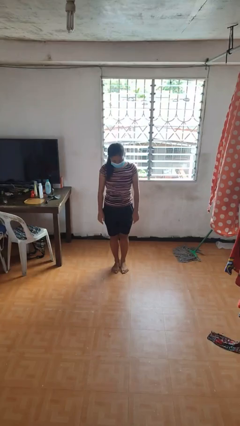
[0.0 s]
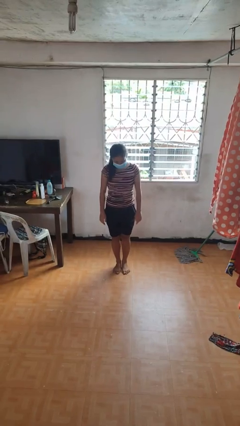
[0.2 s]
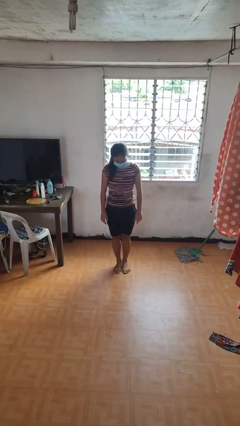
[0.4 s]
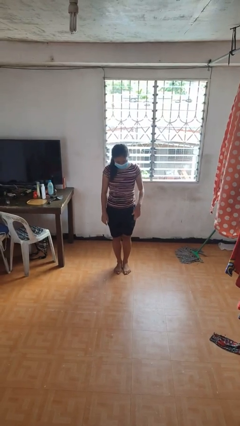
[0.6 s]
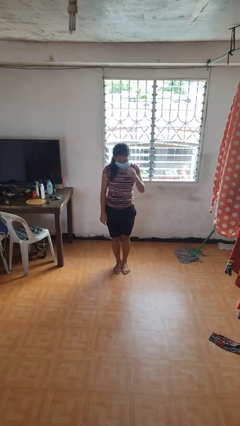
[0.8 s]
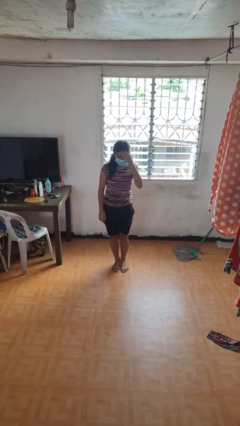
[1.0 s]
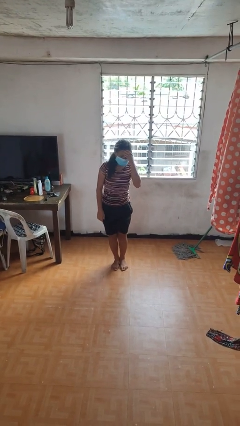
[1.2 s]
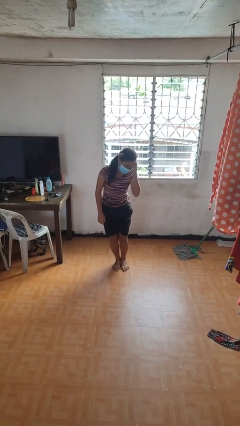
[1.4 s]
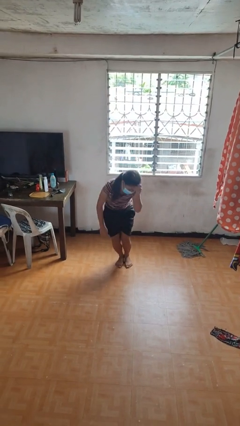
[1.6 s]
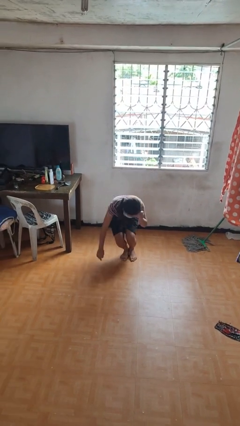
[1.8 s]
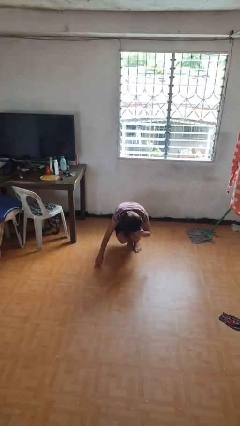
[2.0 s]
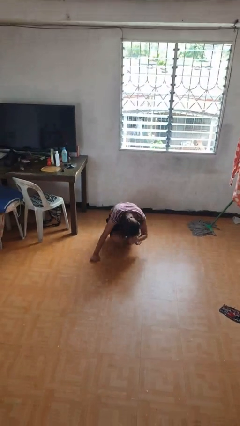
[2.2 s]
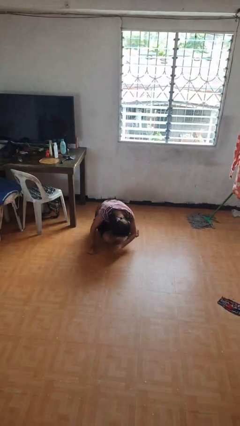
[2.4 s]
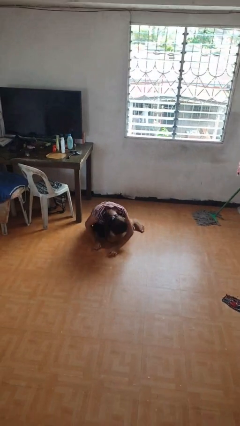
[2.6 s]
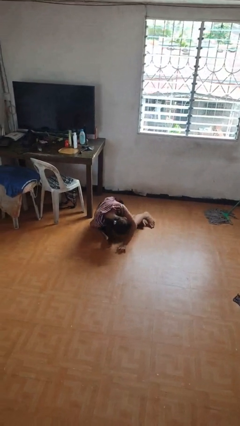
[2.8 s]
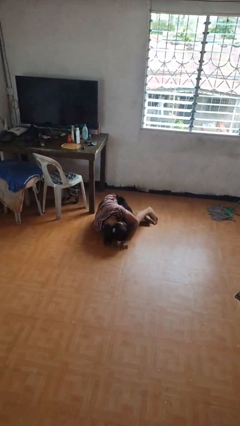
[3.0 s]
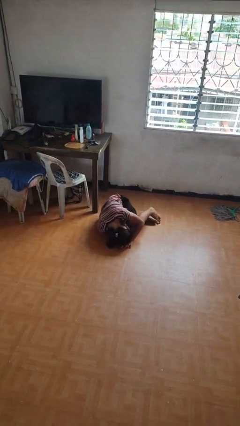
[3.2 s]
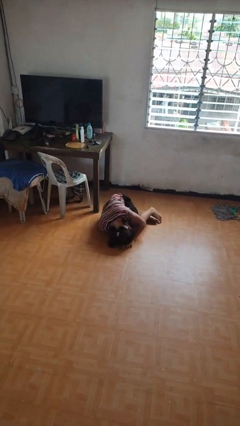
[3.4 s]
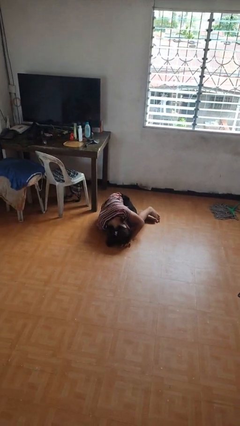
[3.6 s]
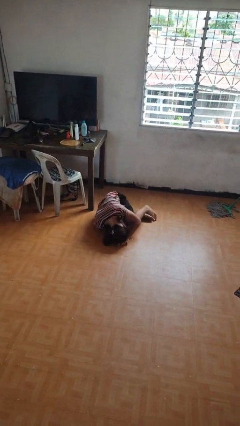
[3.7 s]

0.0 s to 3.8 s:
person falls while standing

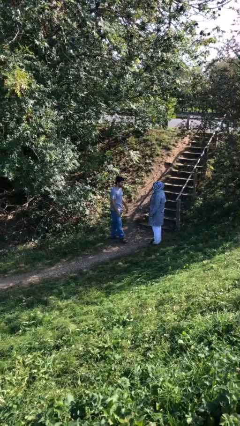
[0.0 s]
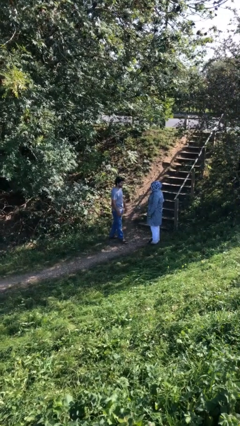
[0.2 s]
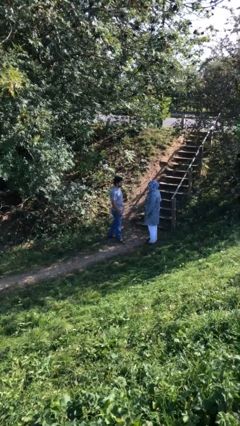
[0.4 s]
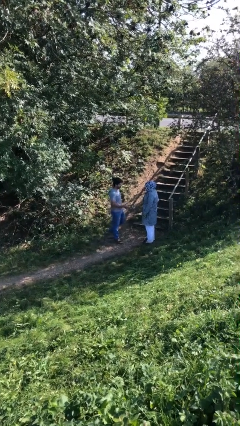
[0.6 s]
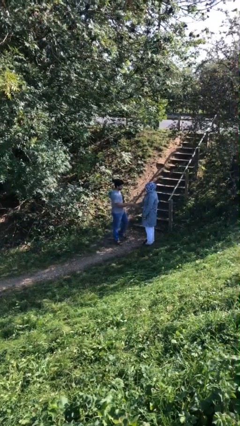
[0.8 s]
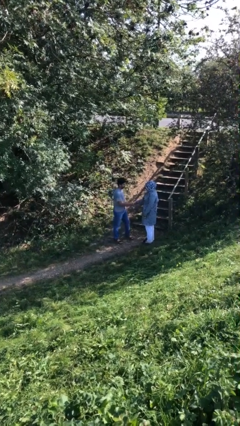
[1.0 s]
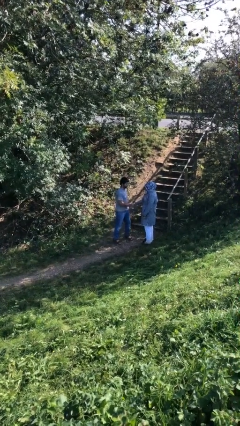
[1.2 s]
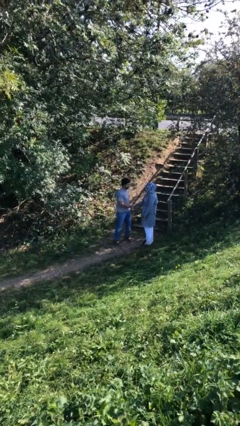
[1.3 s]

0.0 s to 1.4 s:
person shakes hand

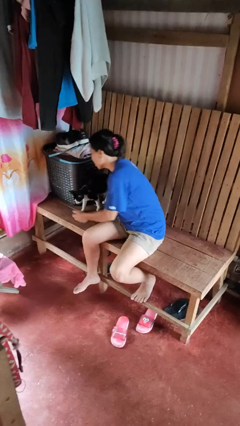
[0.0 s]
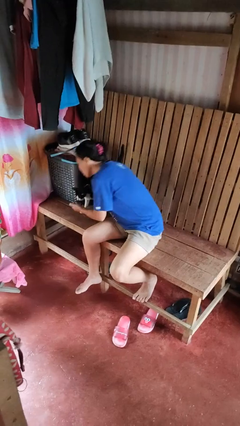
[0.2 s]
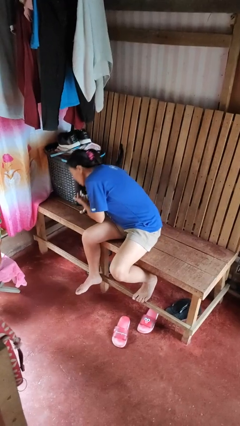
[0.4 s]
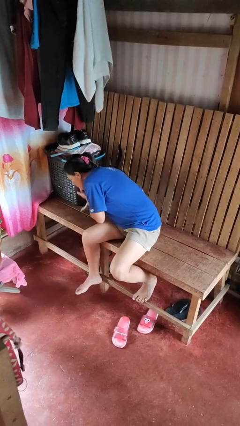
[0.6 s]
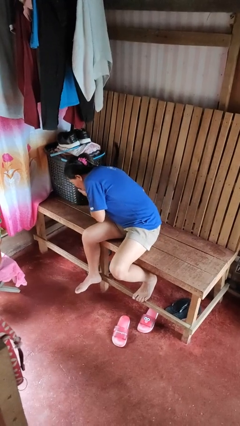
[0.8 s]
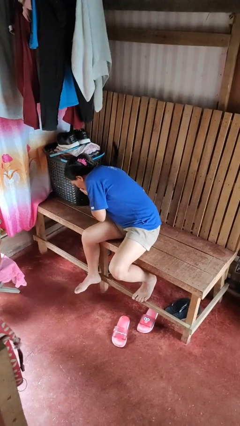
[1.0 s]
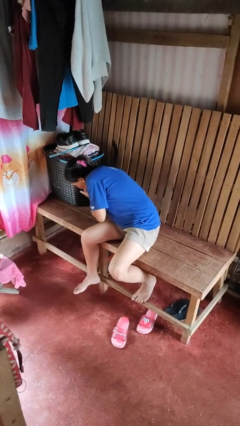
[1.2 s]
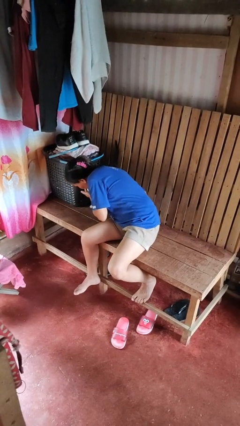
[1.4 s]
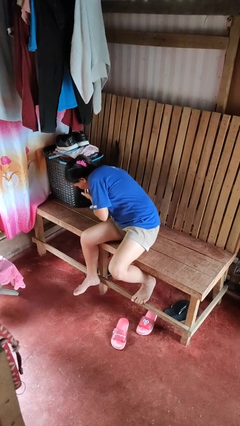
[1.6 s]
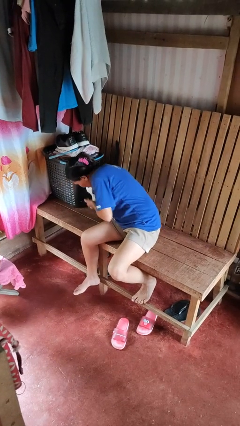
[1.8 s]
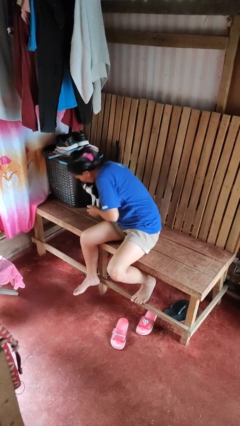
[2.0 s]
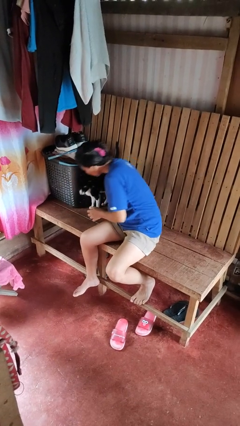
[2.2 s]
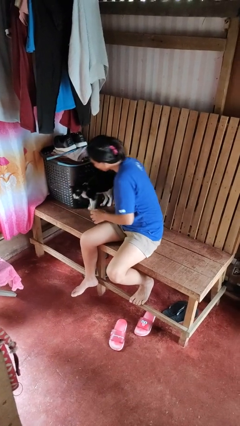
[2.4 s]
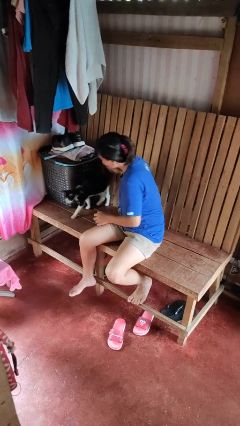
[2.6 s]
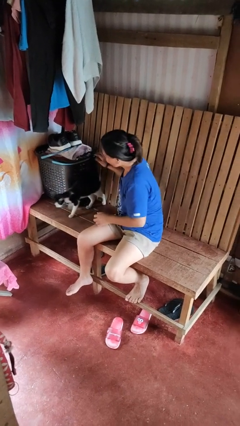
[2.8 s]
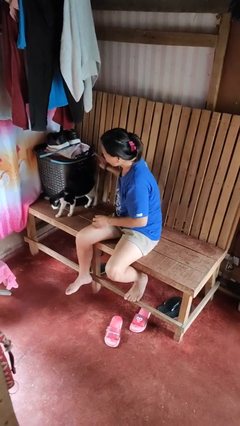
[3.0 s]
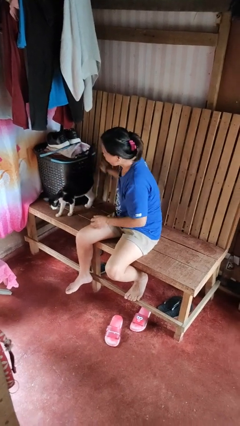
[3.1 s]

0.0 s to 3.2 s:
person hugs cat

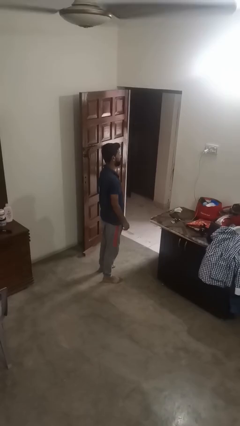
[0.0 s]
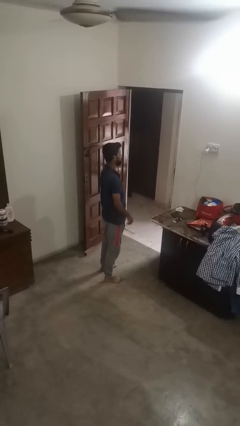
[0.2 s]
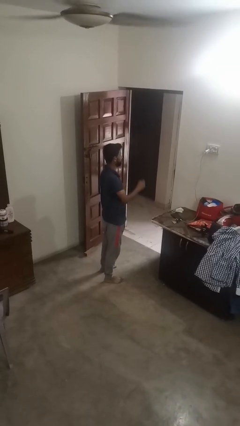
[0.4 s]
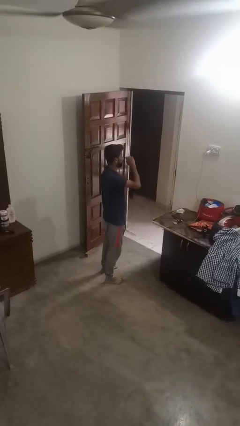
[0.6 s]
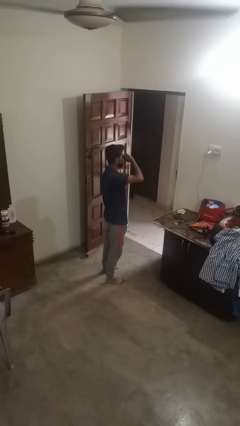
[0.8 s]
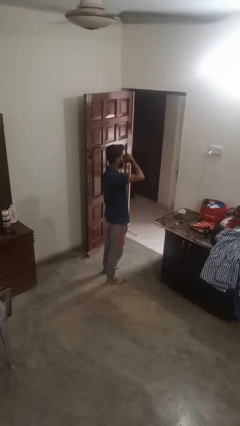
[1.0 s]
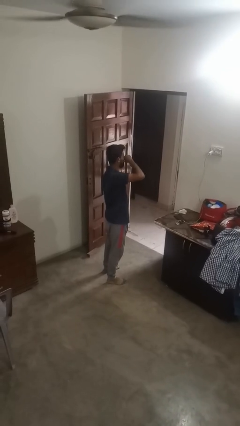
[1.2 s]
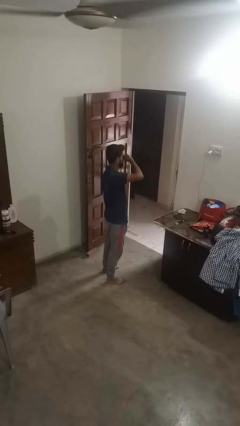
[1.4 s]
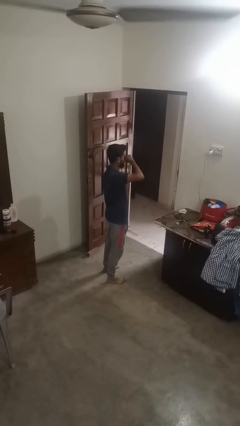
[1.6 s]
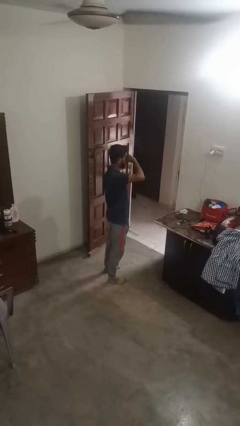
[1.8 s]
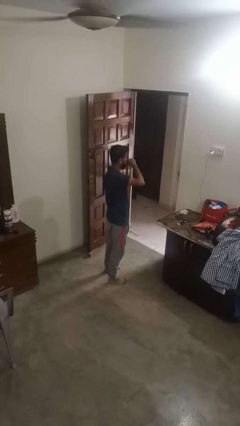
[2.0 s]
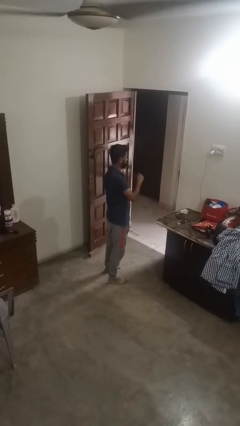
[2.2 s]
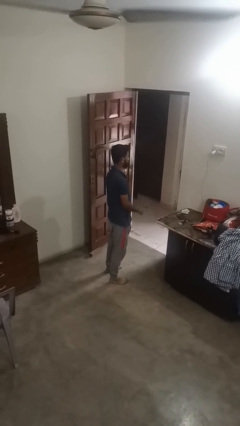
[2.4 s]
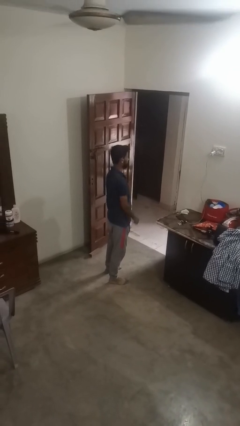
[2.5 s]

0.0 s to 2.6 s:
person rubs eyes

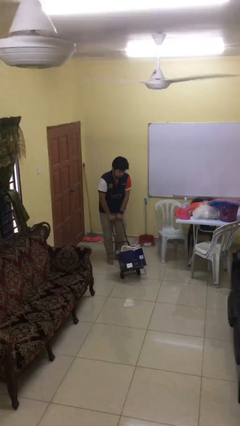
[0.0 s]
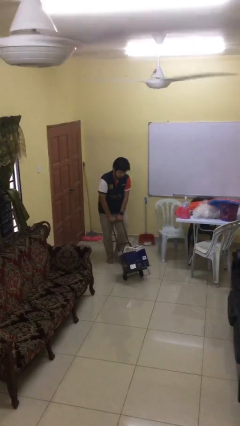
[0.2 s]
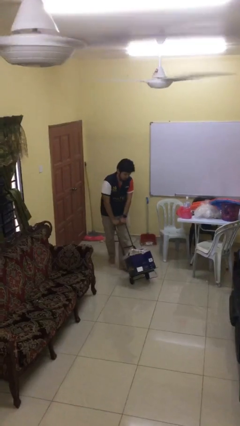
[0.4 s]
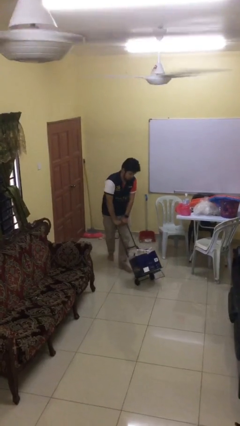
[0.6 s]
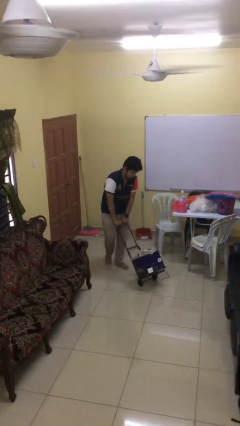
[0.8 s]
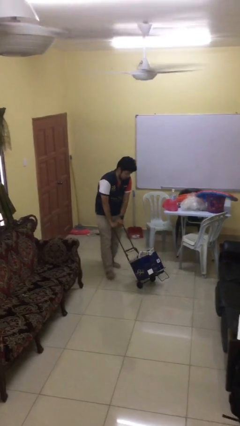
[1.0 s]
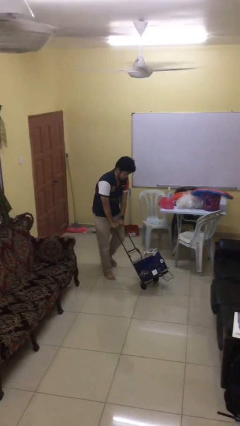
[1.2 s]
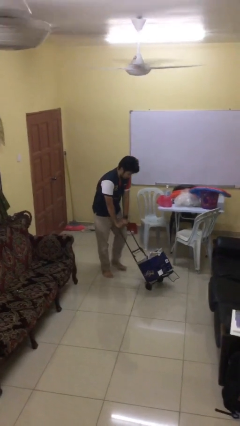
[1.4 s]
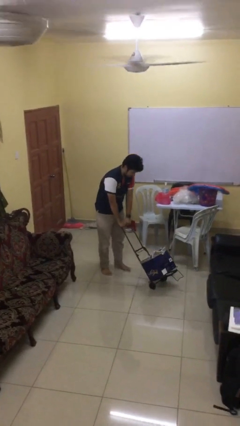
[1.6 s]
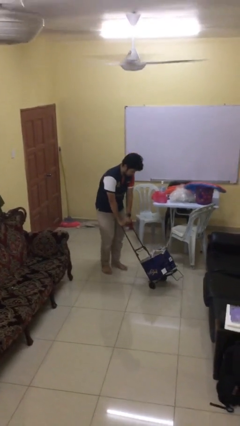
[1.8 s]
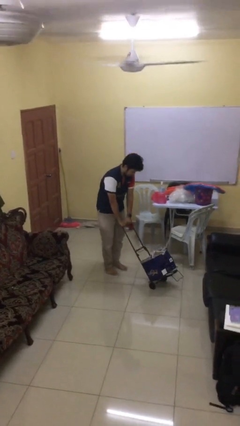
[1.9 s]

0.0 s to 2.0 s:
person pushes wheeled cart

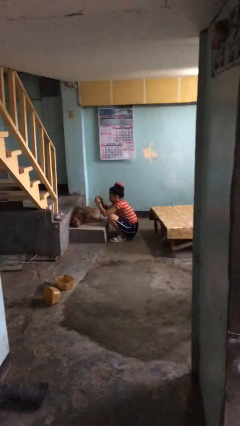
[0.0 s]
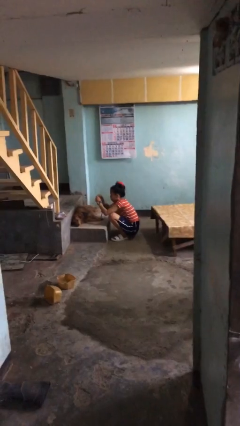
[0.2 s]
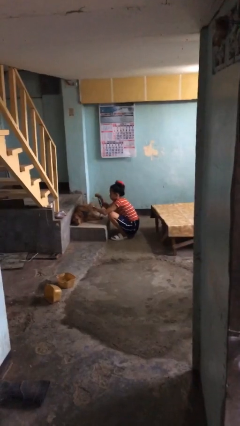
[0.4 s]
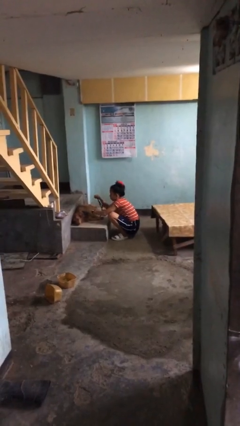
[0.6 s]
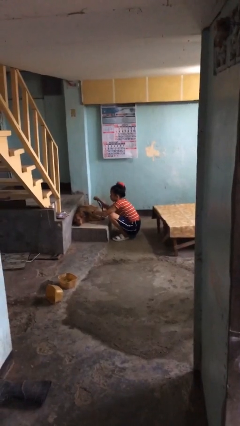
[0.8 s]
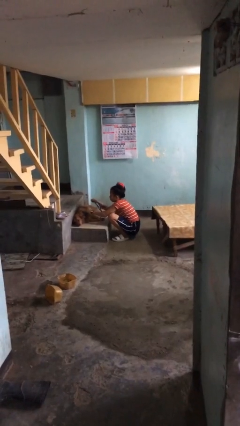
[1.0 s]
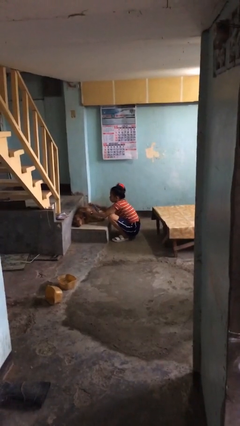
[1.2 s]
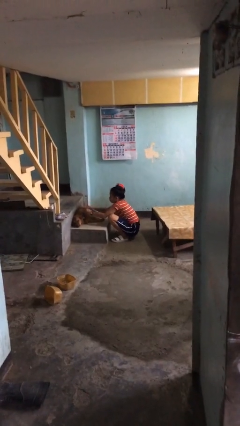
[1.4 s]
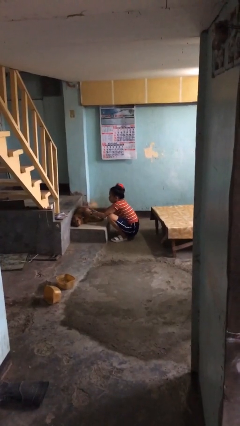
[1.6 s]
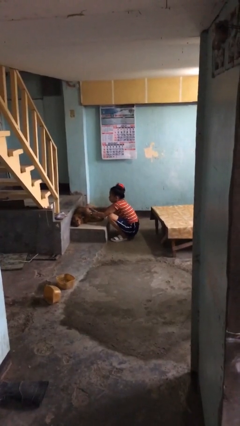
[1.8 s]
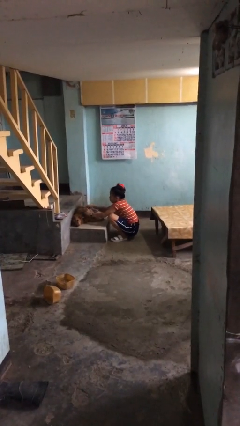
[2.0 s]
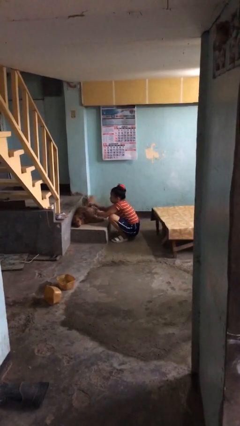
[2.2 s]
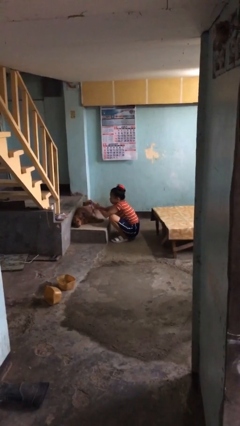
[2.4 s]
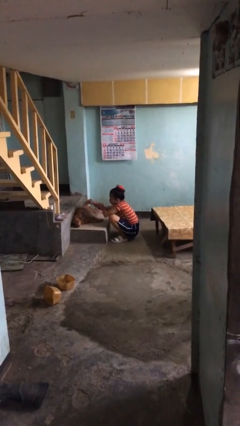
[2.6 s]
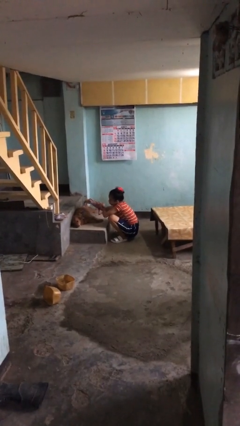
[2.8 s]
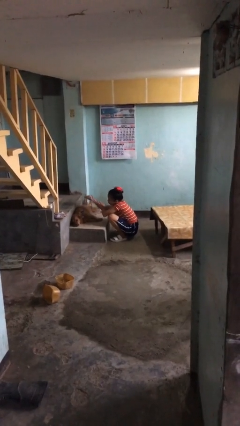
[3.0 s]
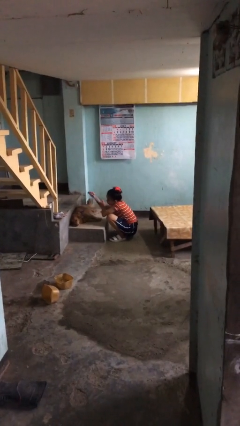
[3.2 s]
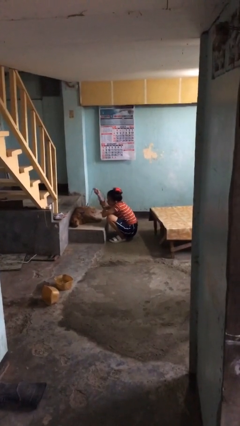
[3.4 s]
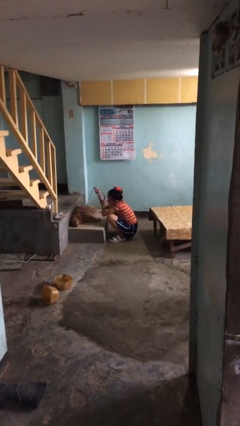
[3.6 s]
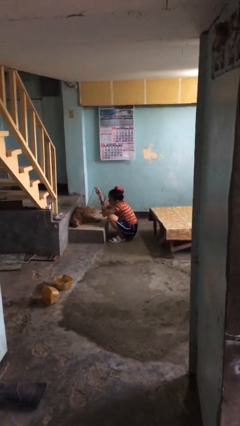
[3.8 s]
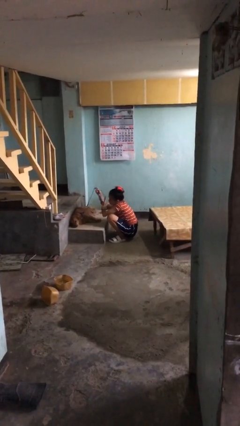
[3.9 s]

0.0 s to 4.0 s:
person attaches leash to dog

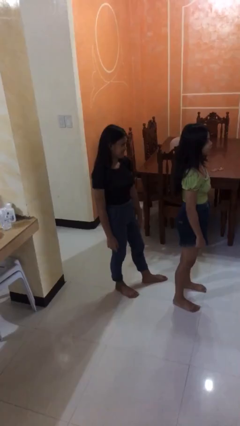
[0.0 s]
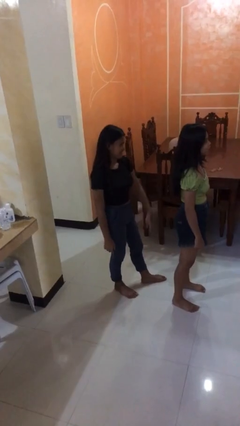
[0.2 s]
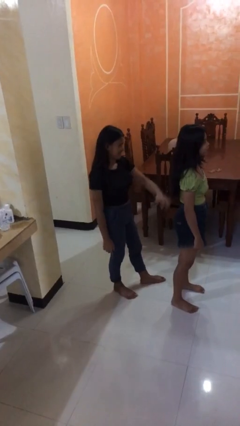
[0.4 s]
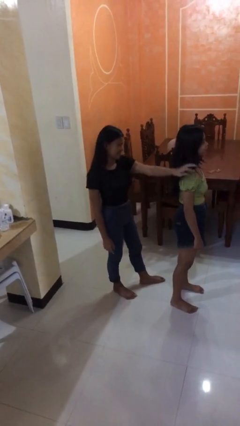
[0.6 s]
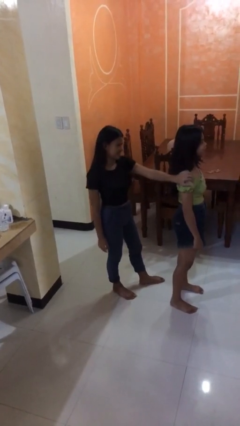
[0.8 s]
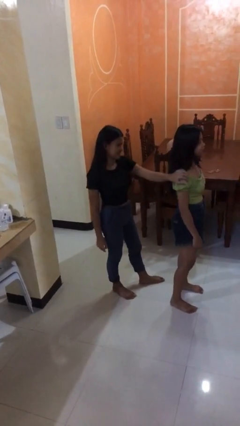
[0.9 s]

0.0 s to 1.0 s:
person grabs person by shoulder
